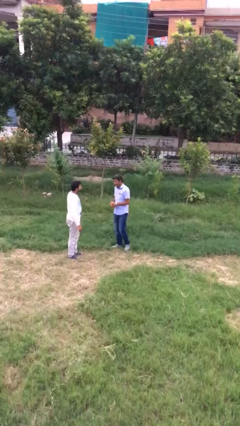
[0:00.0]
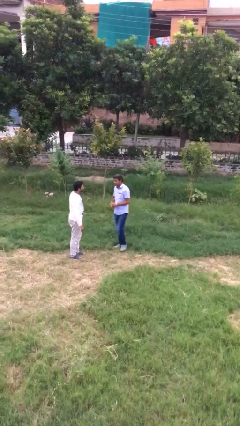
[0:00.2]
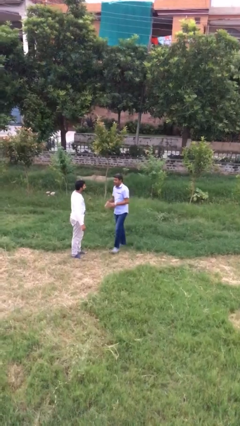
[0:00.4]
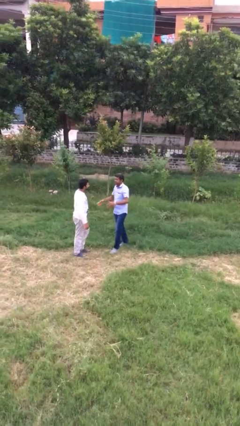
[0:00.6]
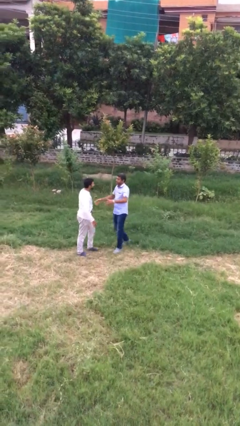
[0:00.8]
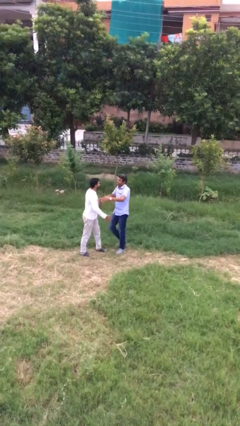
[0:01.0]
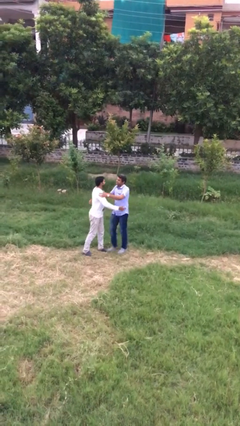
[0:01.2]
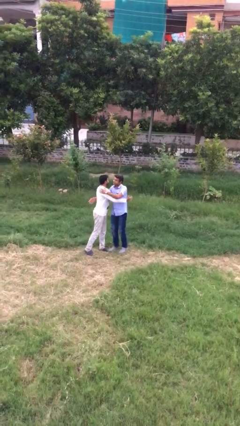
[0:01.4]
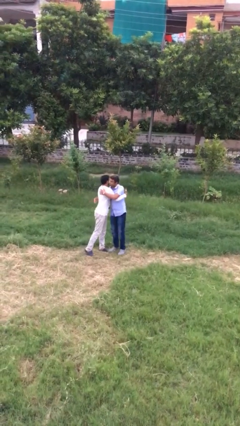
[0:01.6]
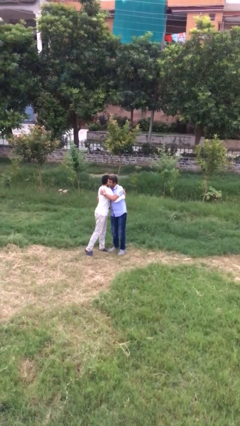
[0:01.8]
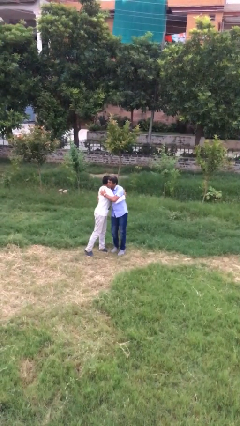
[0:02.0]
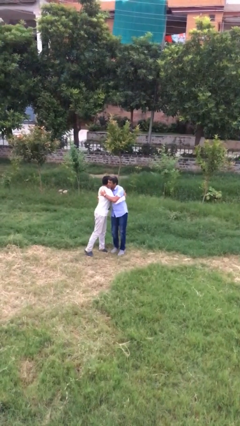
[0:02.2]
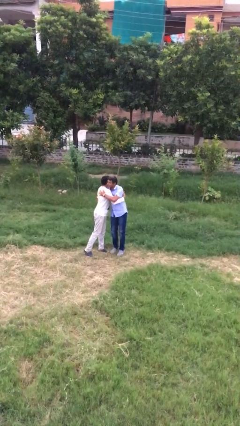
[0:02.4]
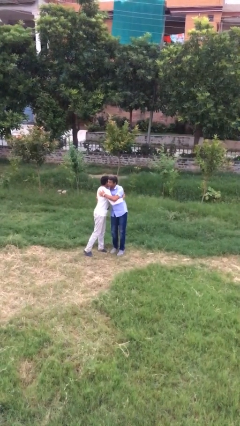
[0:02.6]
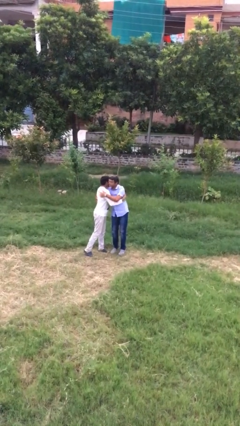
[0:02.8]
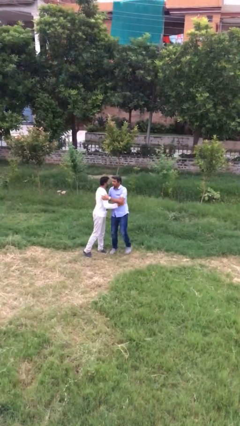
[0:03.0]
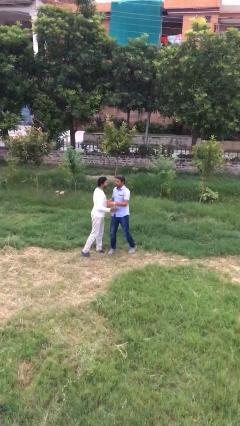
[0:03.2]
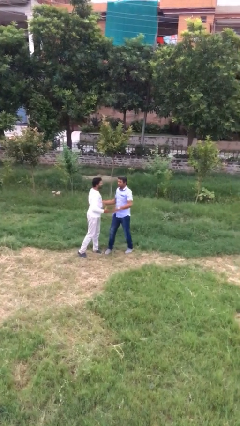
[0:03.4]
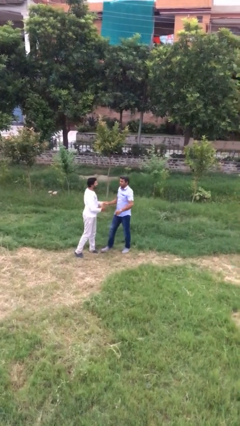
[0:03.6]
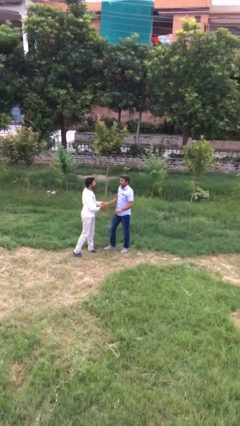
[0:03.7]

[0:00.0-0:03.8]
person embraces person

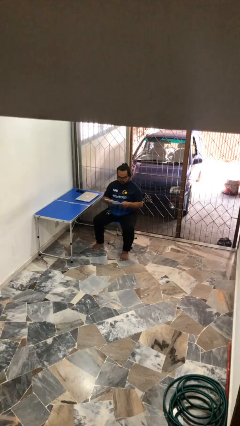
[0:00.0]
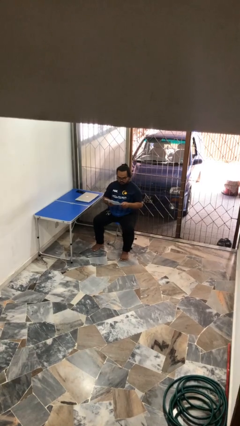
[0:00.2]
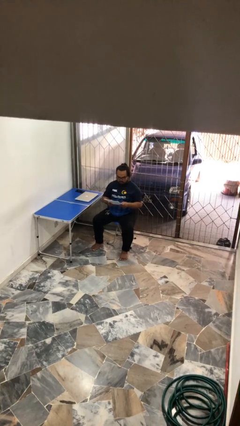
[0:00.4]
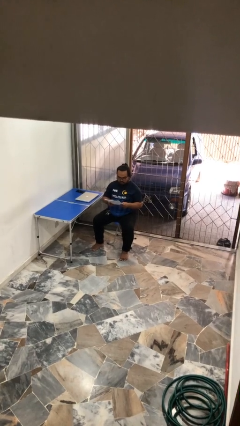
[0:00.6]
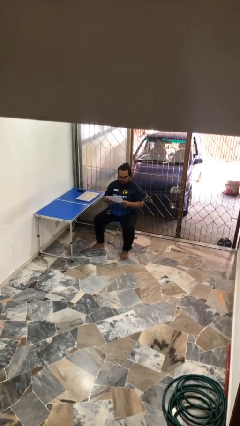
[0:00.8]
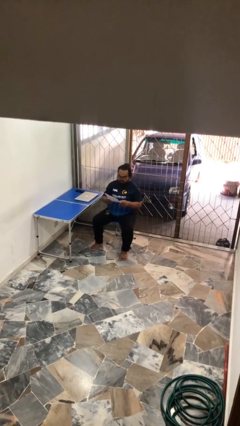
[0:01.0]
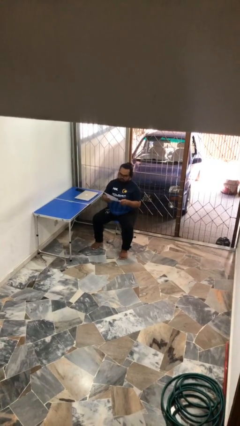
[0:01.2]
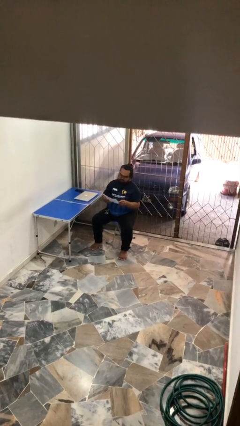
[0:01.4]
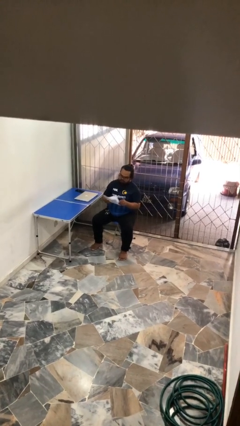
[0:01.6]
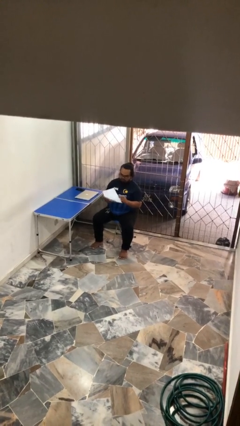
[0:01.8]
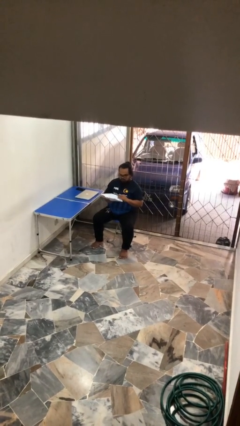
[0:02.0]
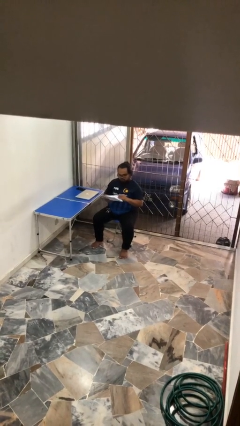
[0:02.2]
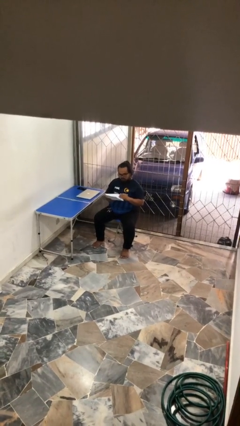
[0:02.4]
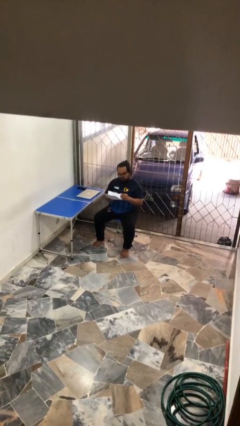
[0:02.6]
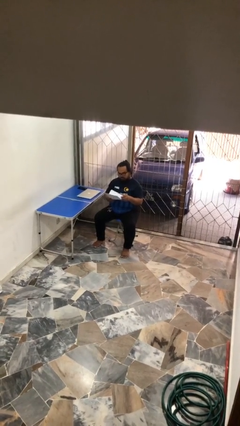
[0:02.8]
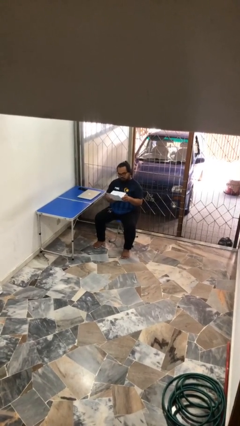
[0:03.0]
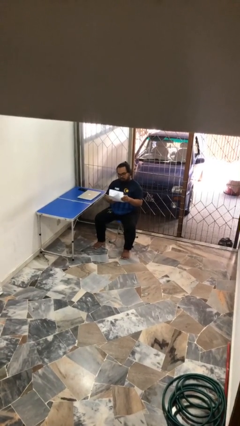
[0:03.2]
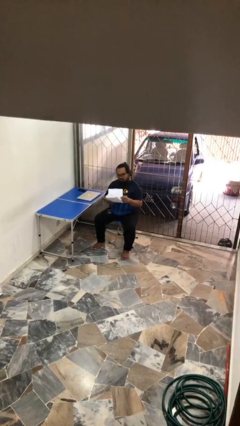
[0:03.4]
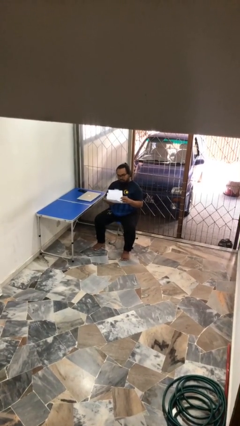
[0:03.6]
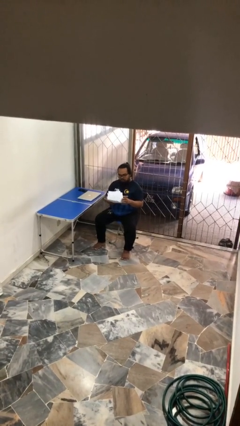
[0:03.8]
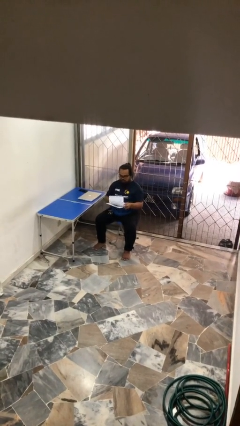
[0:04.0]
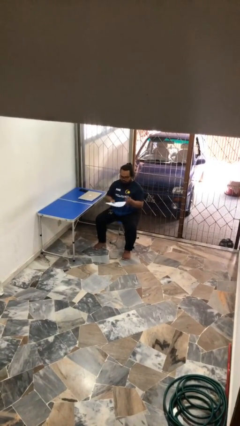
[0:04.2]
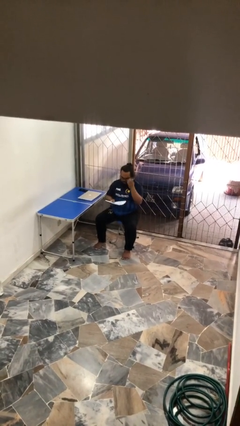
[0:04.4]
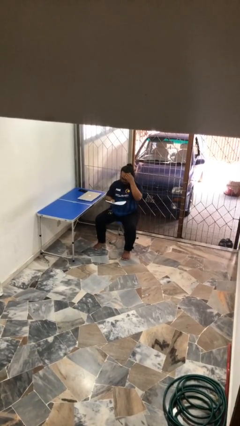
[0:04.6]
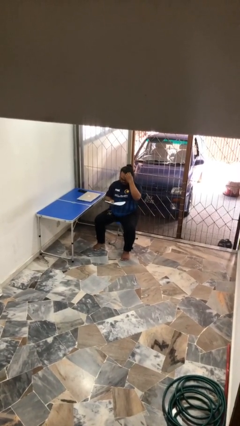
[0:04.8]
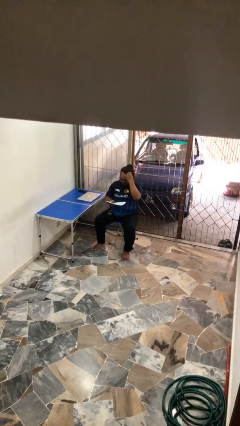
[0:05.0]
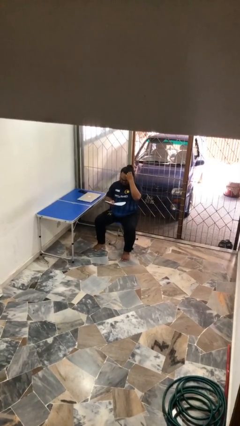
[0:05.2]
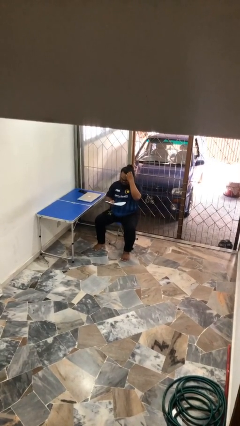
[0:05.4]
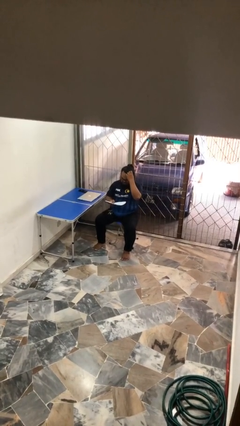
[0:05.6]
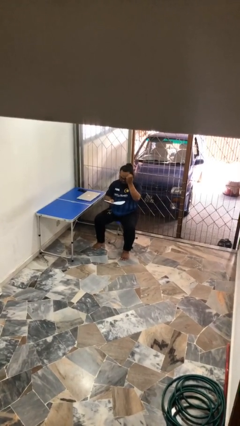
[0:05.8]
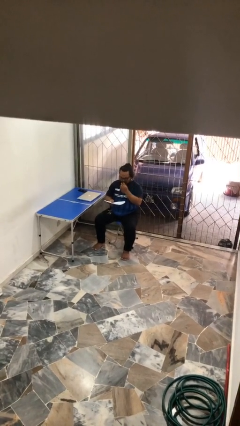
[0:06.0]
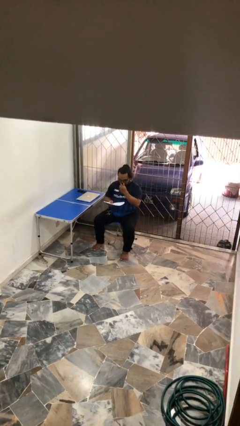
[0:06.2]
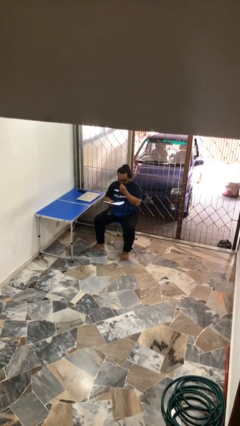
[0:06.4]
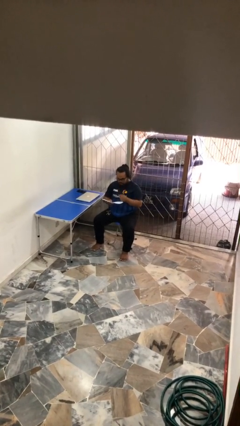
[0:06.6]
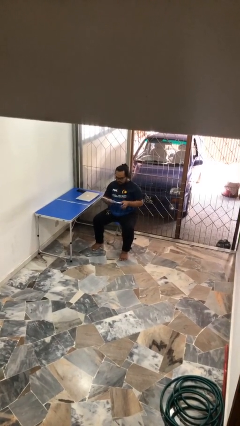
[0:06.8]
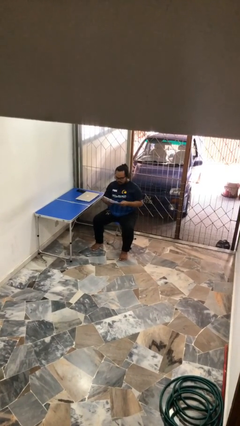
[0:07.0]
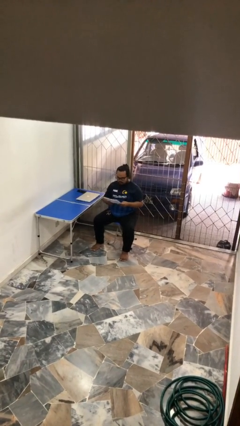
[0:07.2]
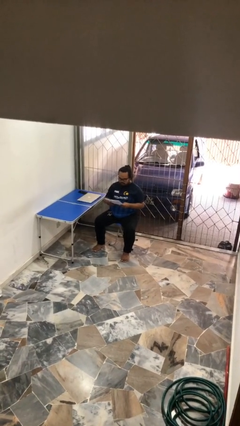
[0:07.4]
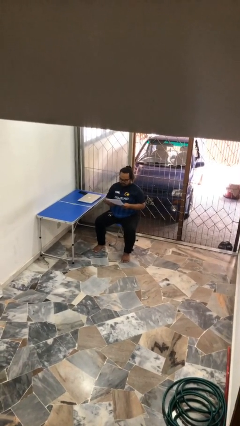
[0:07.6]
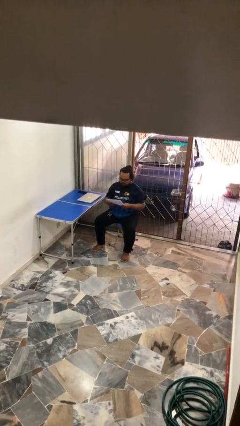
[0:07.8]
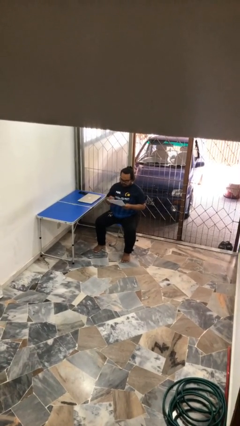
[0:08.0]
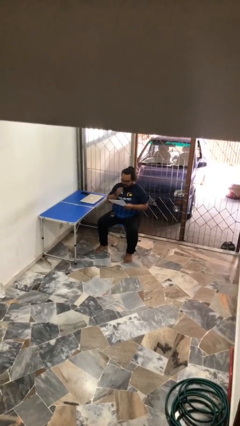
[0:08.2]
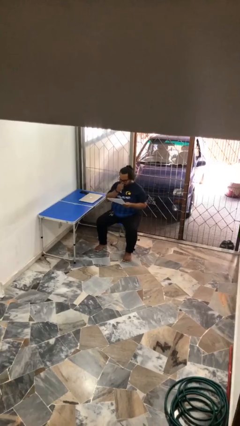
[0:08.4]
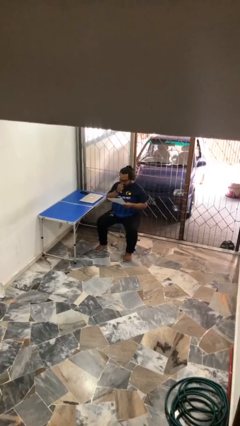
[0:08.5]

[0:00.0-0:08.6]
person reads document

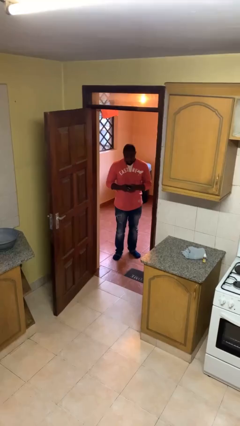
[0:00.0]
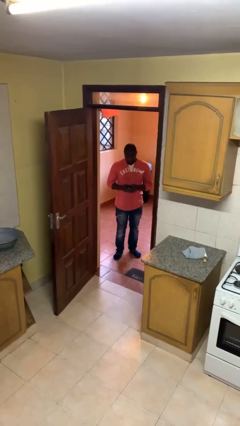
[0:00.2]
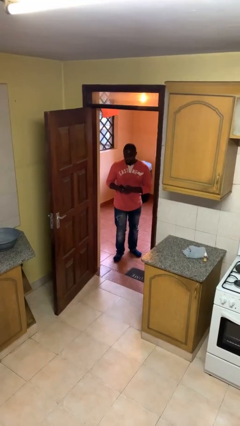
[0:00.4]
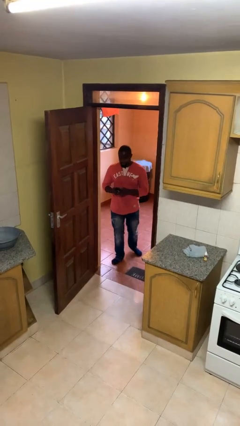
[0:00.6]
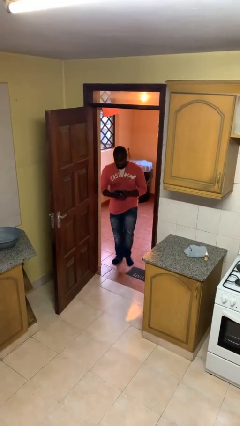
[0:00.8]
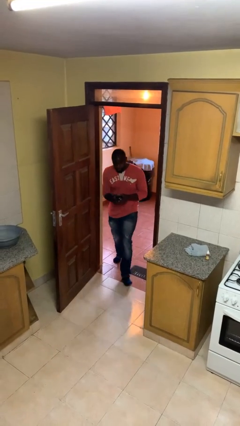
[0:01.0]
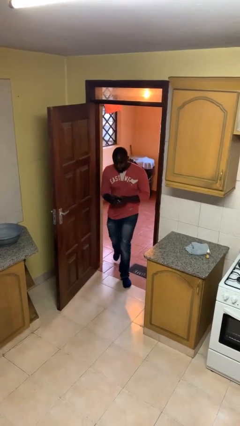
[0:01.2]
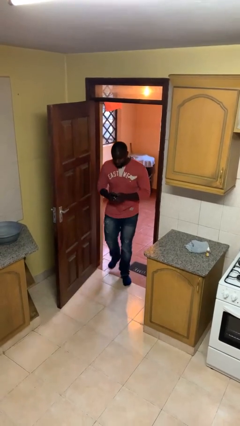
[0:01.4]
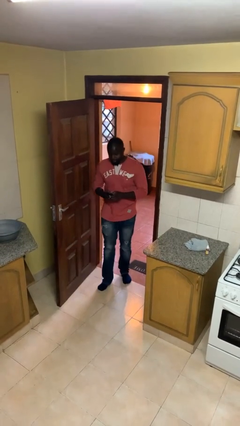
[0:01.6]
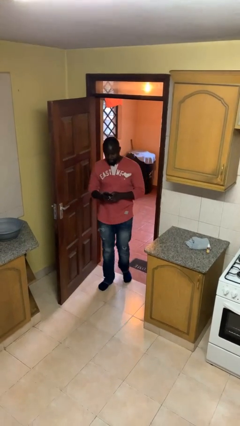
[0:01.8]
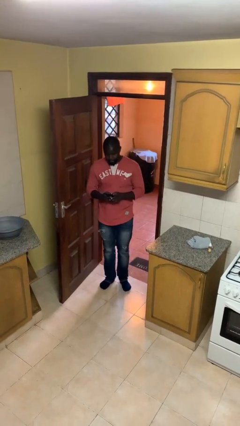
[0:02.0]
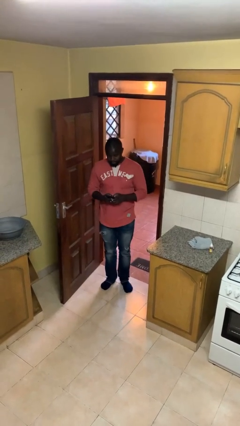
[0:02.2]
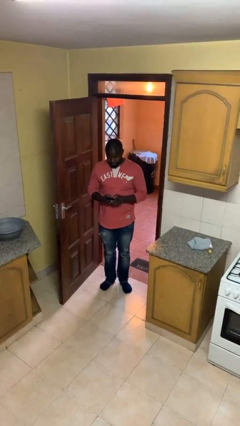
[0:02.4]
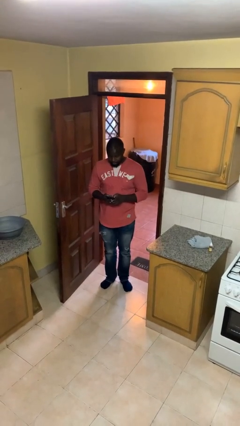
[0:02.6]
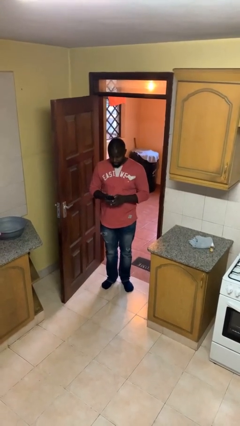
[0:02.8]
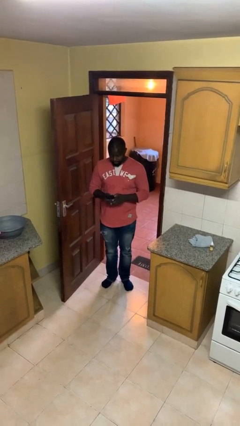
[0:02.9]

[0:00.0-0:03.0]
person enters scene through structure

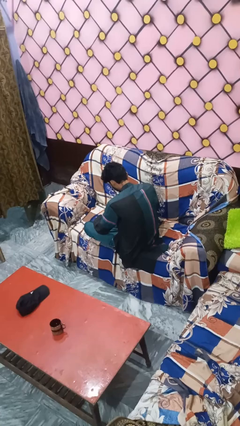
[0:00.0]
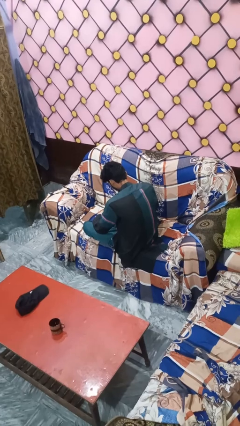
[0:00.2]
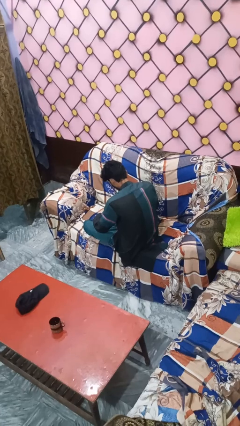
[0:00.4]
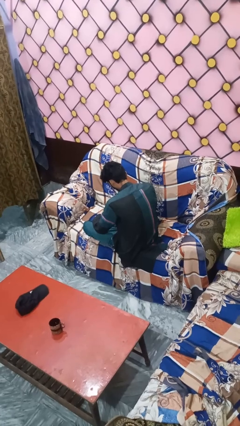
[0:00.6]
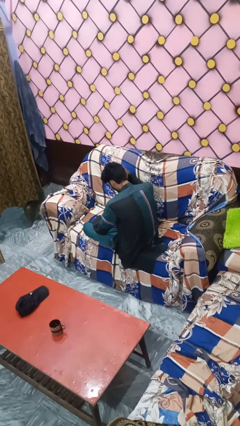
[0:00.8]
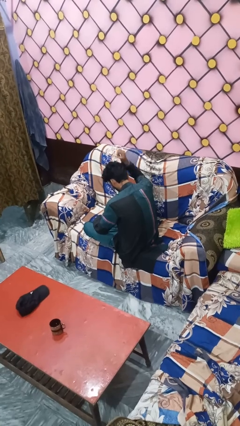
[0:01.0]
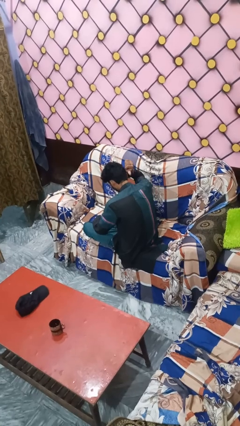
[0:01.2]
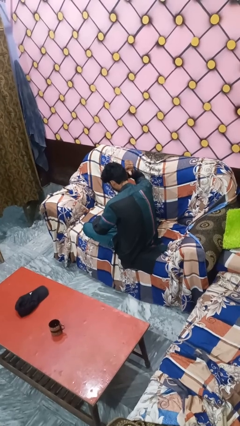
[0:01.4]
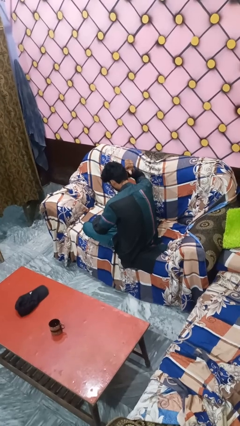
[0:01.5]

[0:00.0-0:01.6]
person gestures behind me

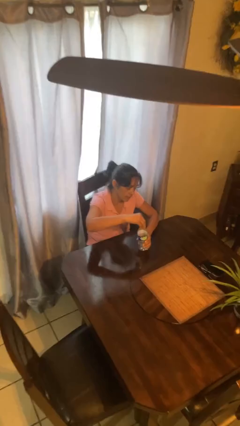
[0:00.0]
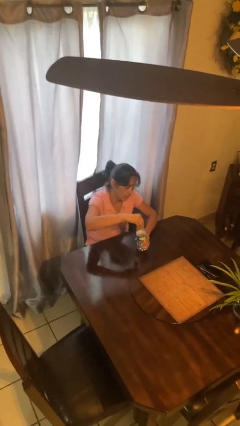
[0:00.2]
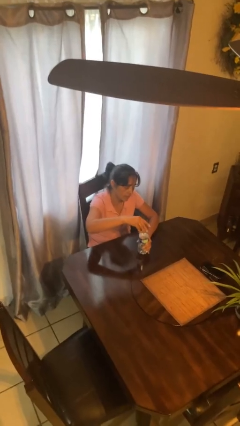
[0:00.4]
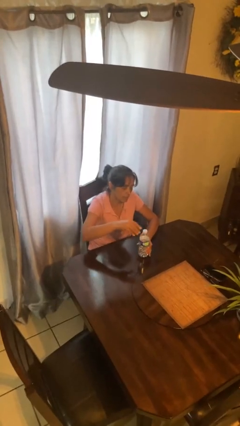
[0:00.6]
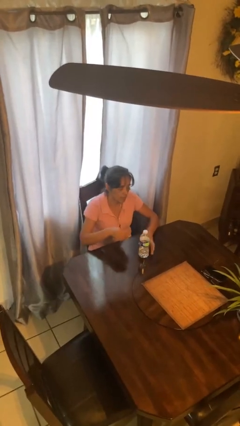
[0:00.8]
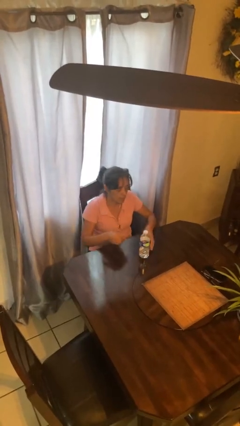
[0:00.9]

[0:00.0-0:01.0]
person screws lid to bottle
